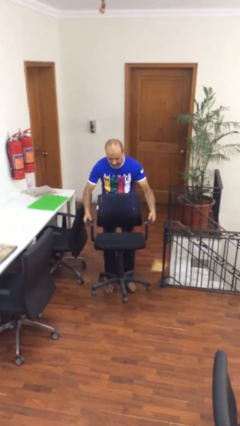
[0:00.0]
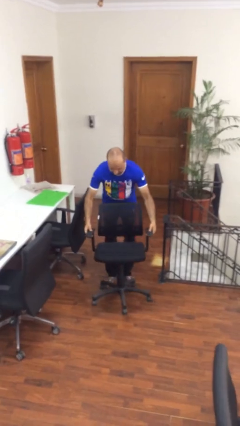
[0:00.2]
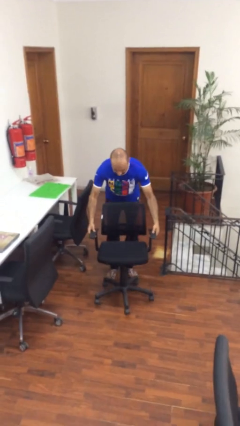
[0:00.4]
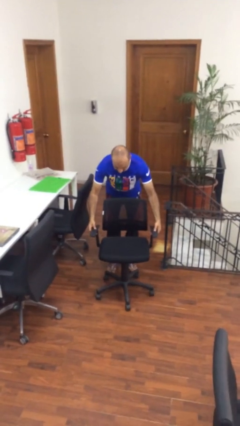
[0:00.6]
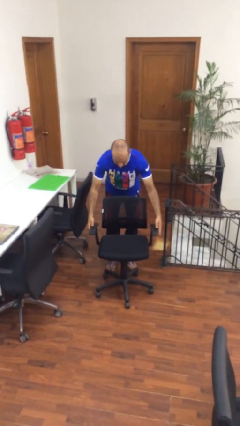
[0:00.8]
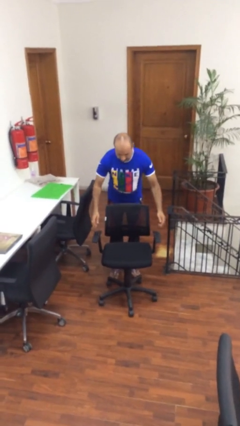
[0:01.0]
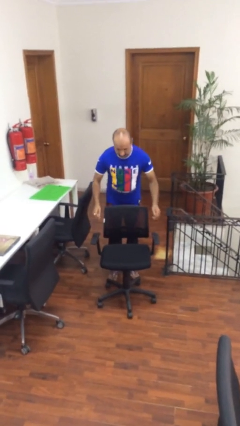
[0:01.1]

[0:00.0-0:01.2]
person puts down object on floor

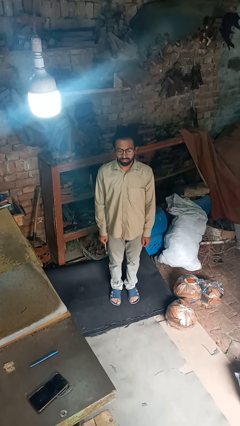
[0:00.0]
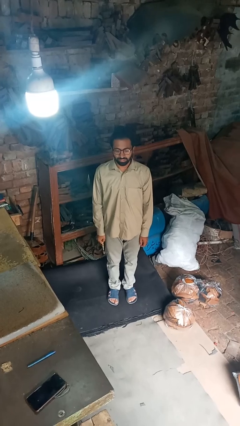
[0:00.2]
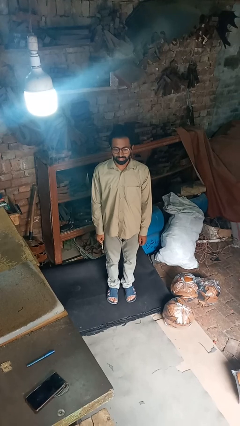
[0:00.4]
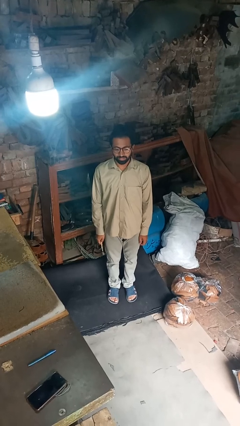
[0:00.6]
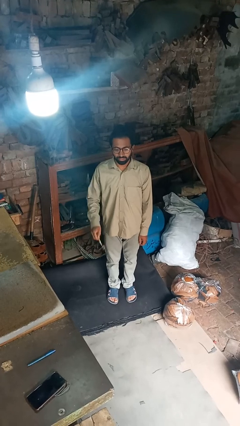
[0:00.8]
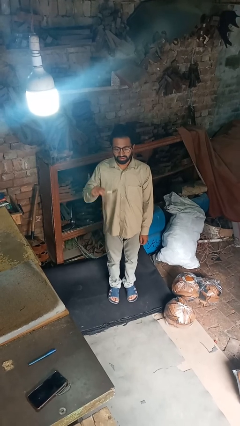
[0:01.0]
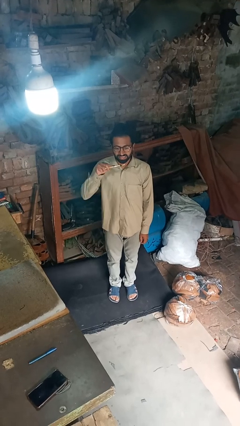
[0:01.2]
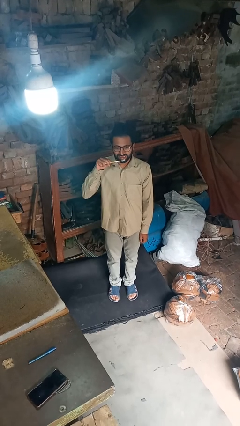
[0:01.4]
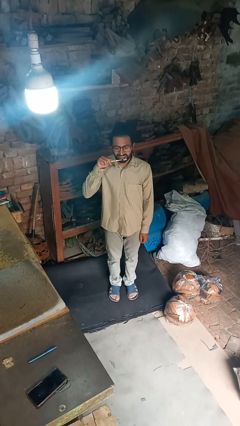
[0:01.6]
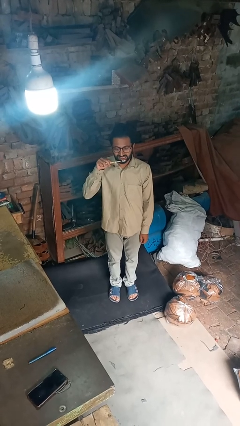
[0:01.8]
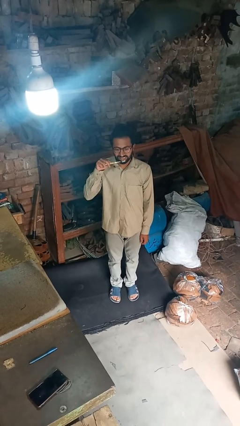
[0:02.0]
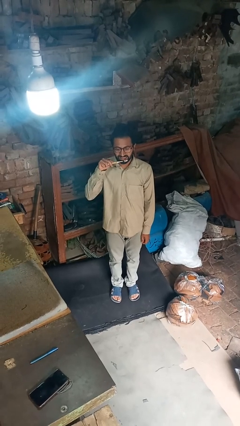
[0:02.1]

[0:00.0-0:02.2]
person brushes teeth

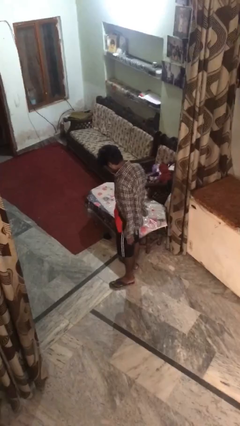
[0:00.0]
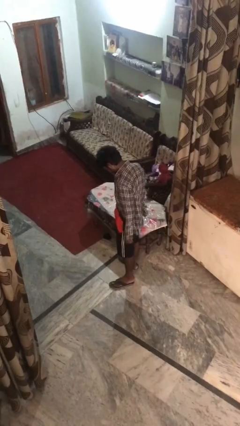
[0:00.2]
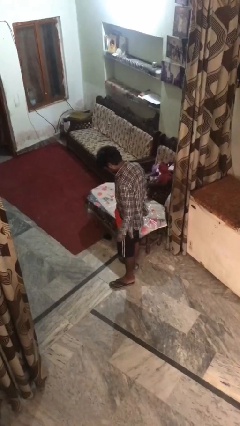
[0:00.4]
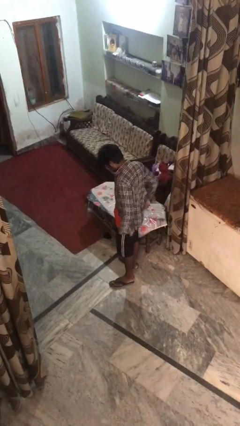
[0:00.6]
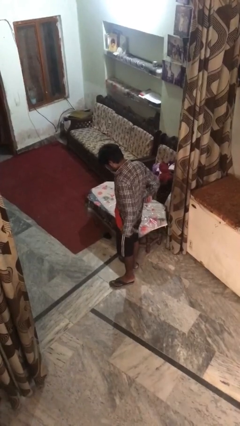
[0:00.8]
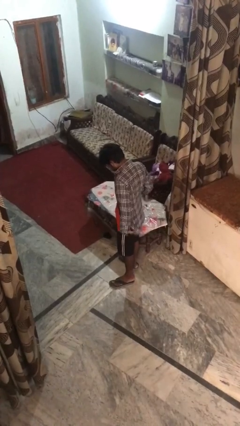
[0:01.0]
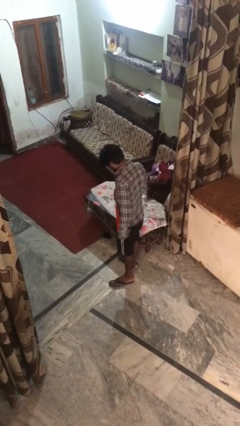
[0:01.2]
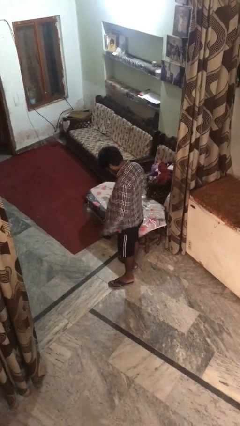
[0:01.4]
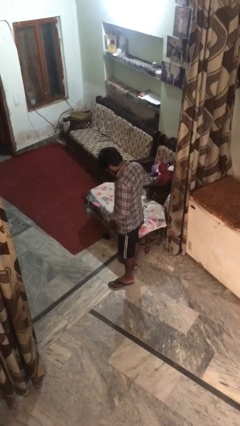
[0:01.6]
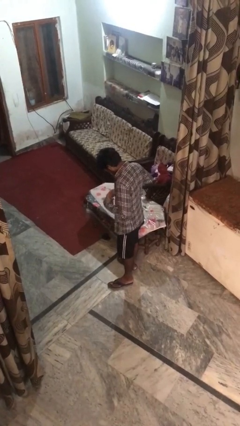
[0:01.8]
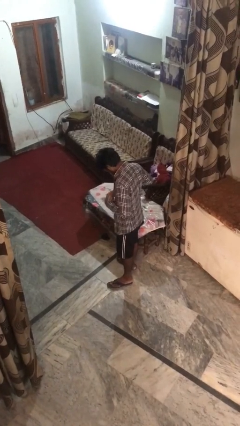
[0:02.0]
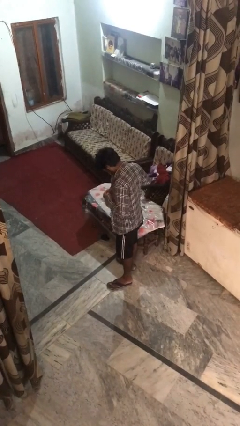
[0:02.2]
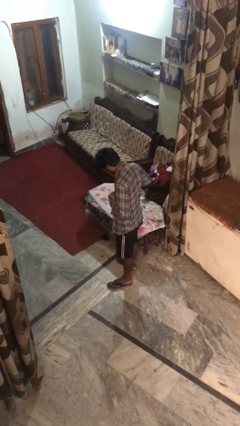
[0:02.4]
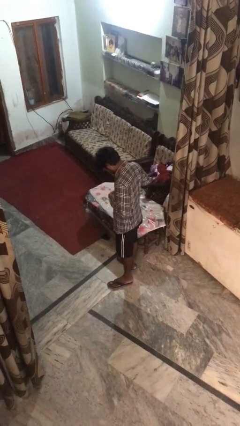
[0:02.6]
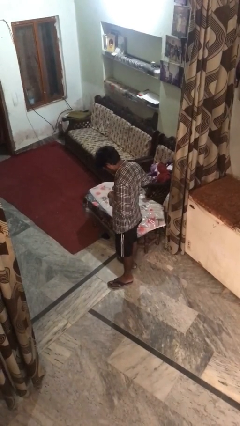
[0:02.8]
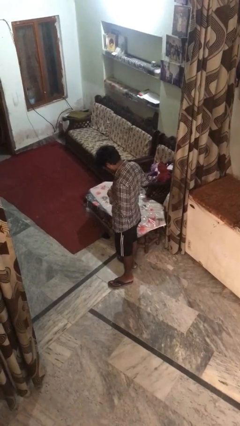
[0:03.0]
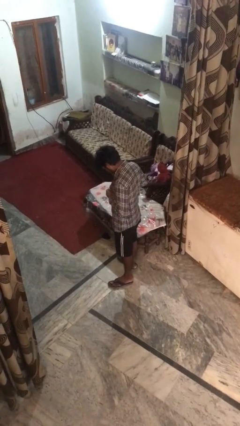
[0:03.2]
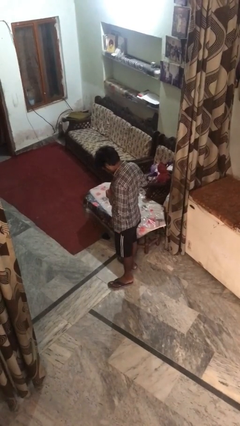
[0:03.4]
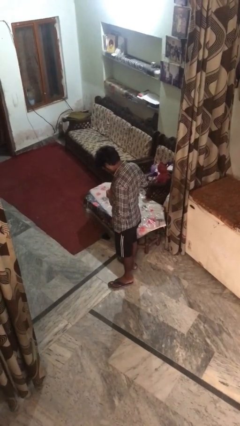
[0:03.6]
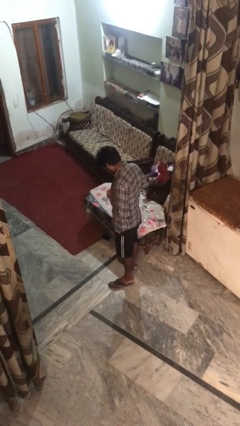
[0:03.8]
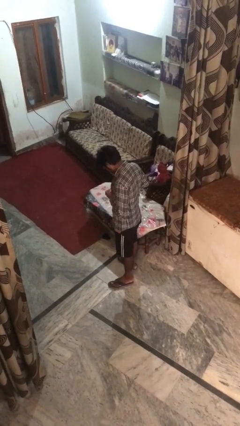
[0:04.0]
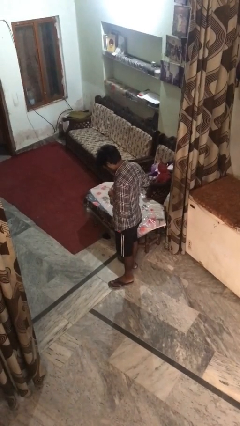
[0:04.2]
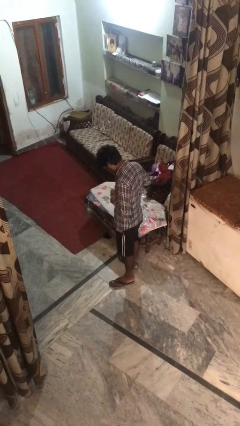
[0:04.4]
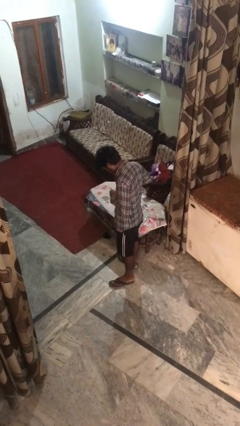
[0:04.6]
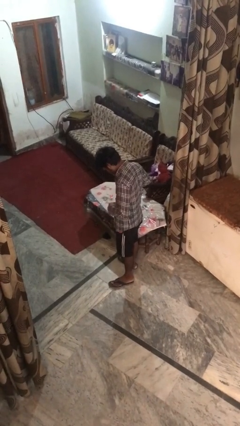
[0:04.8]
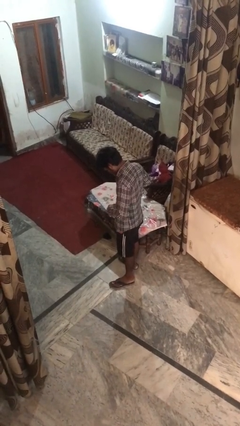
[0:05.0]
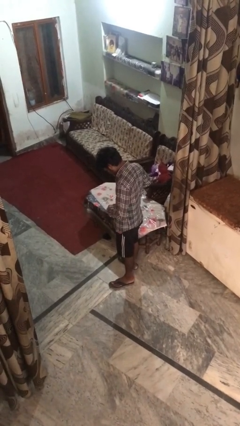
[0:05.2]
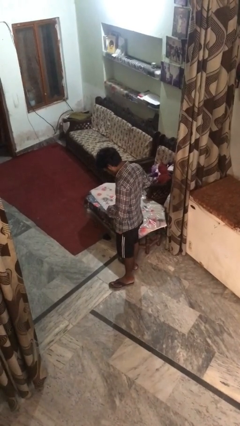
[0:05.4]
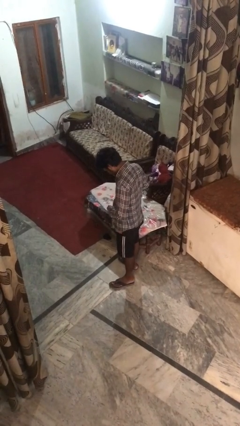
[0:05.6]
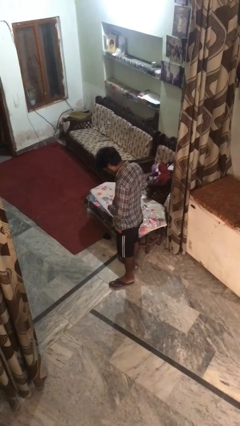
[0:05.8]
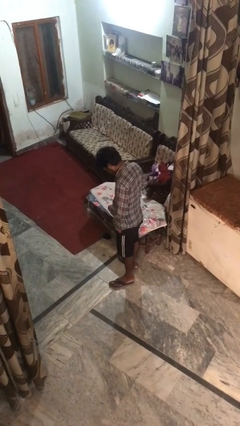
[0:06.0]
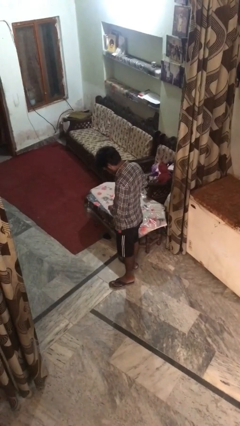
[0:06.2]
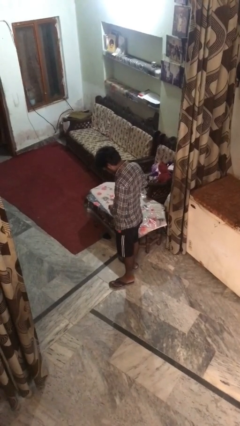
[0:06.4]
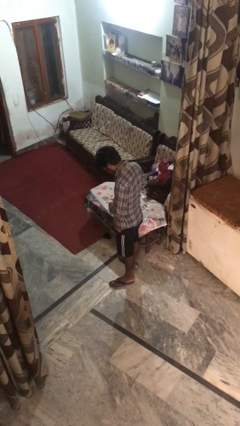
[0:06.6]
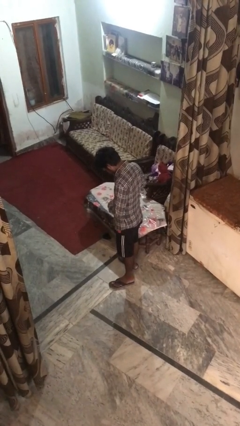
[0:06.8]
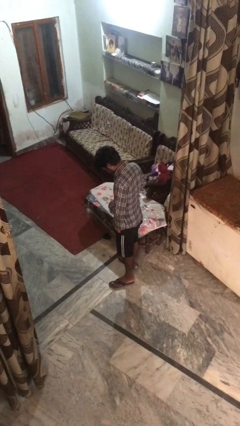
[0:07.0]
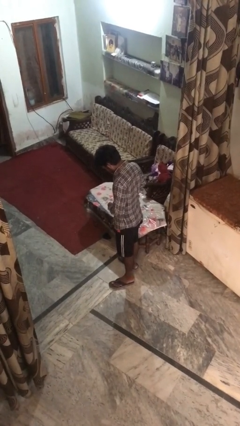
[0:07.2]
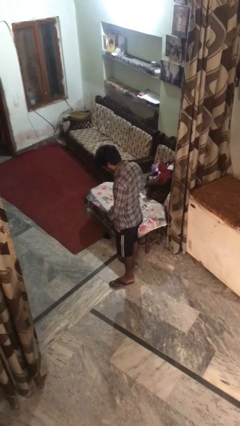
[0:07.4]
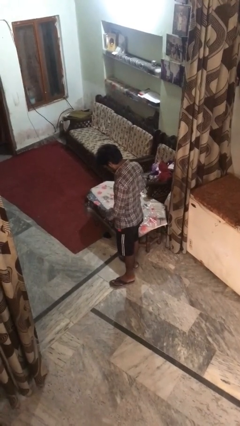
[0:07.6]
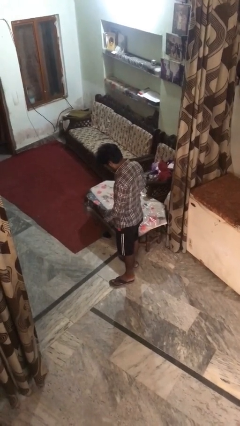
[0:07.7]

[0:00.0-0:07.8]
person buttons shirt

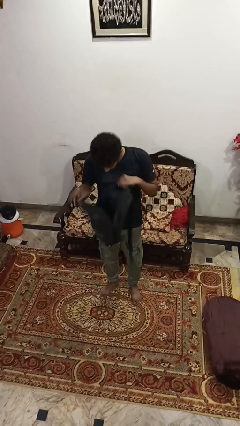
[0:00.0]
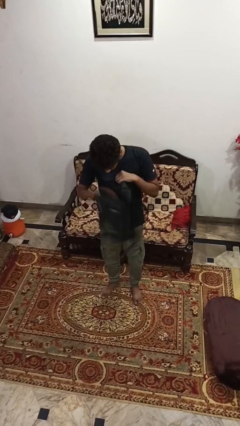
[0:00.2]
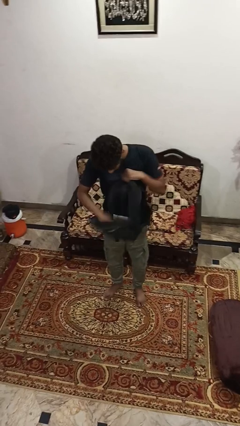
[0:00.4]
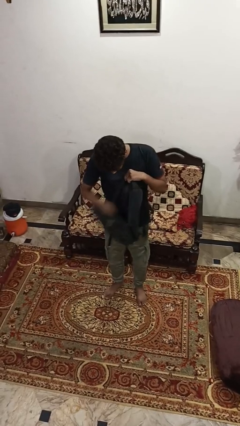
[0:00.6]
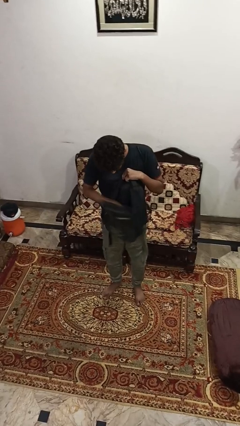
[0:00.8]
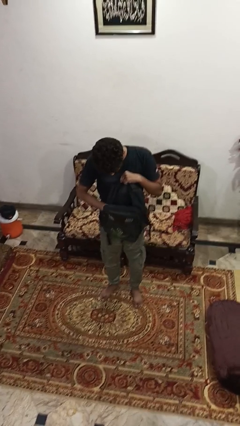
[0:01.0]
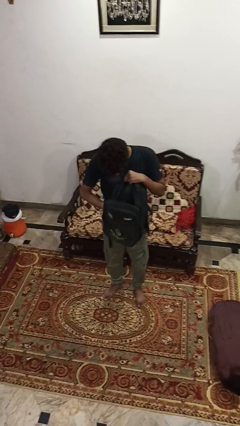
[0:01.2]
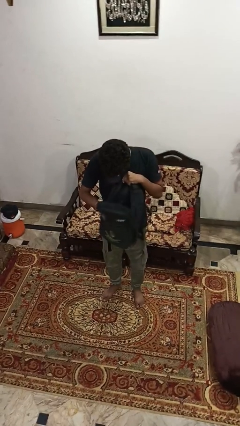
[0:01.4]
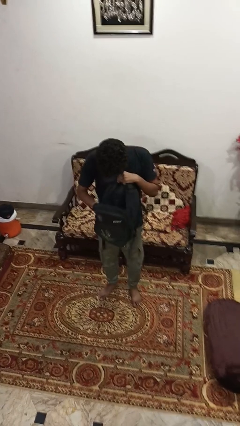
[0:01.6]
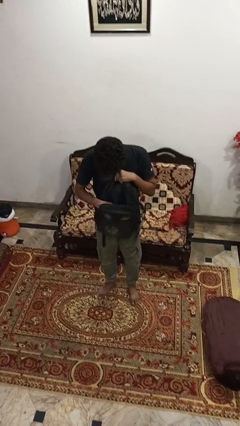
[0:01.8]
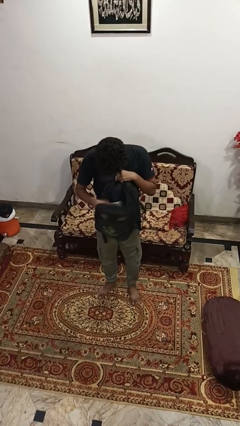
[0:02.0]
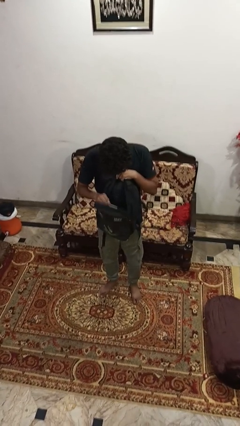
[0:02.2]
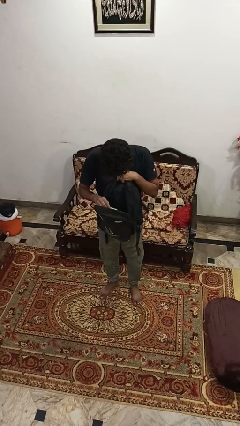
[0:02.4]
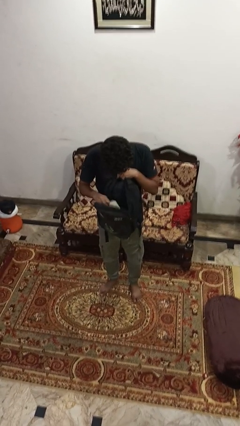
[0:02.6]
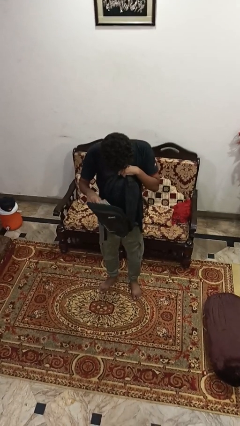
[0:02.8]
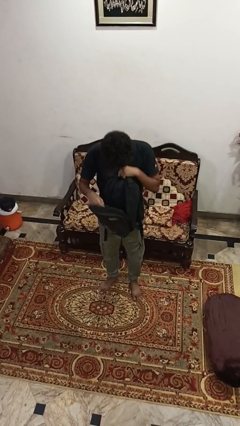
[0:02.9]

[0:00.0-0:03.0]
person searches in backpack

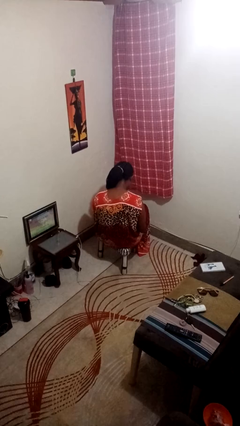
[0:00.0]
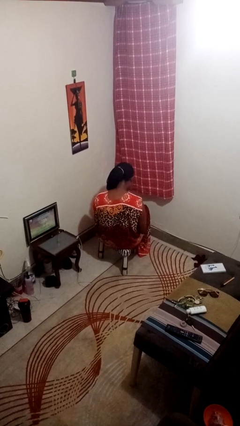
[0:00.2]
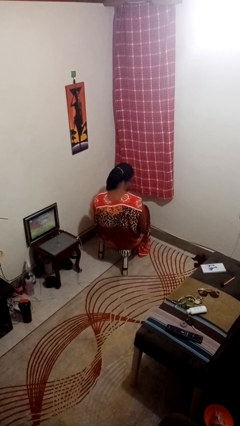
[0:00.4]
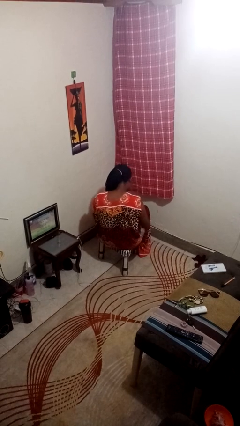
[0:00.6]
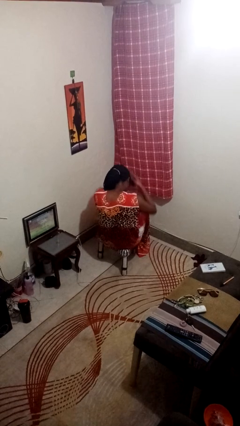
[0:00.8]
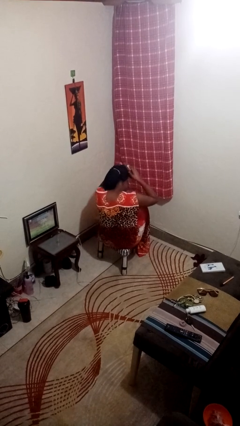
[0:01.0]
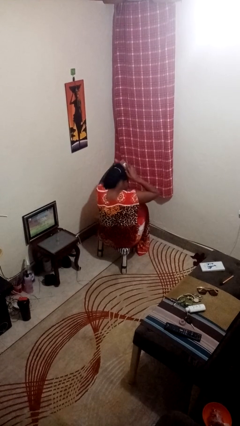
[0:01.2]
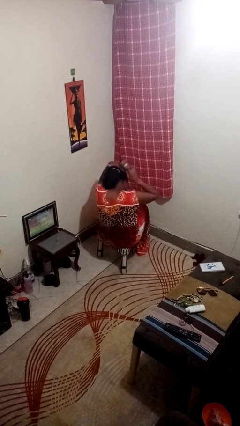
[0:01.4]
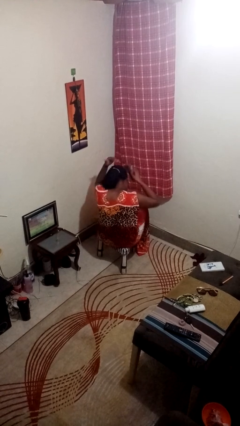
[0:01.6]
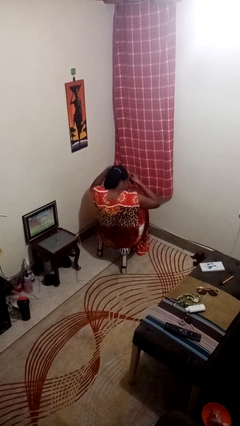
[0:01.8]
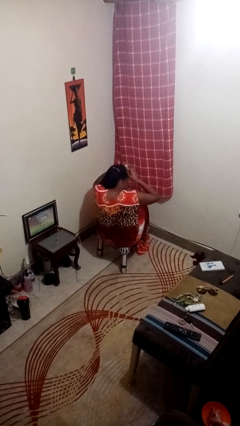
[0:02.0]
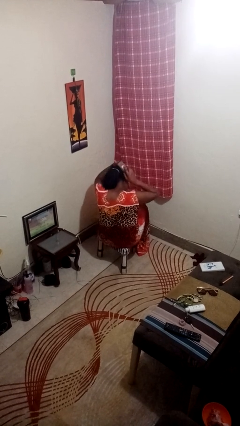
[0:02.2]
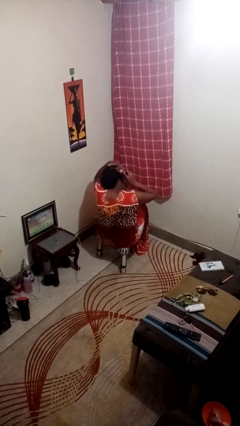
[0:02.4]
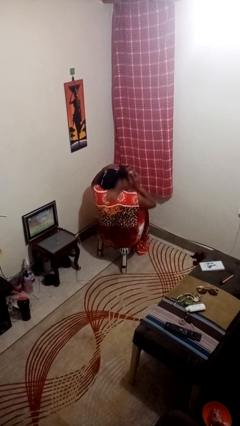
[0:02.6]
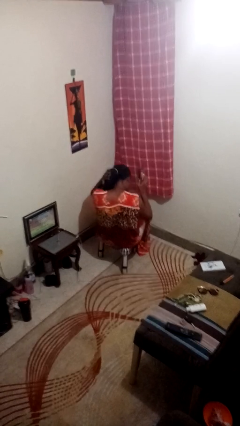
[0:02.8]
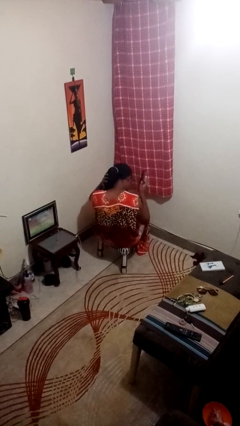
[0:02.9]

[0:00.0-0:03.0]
person brushes hair

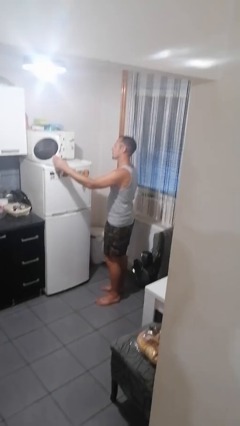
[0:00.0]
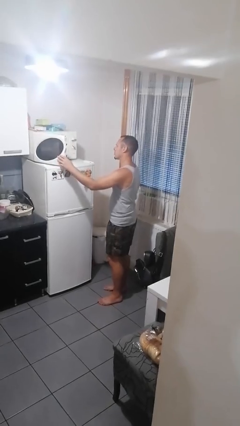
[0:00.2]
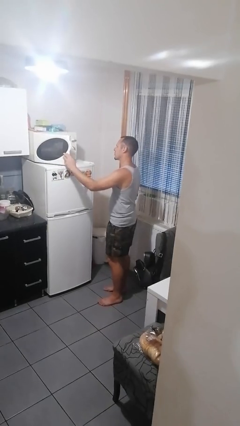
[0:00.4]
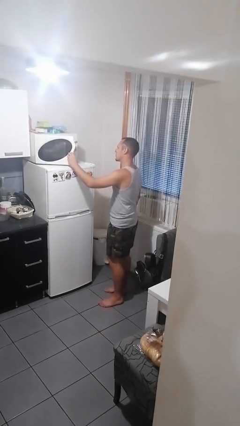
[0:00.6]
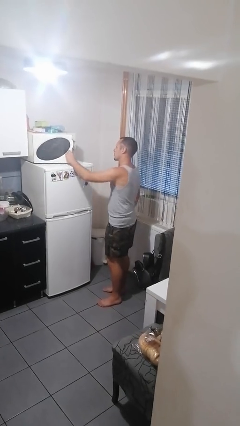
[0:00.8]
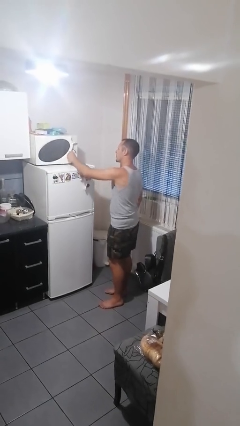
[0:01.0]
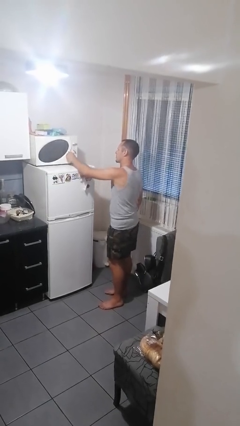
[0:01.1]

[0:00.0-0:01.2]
person closes microwave
